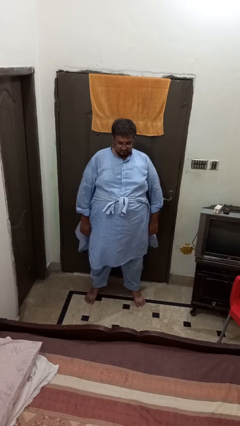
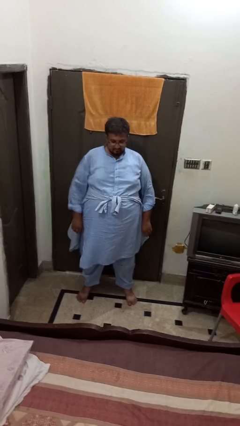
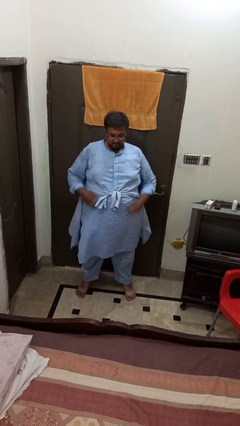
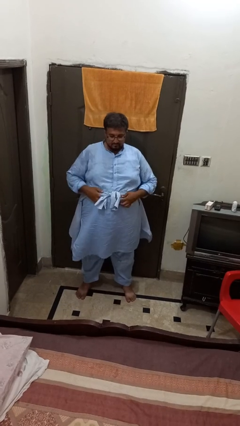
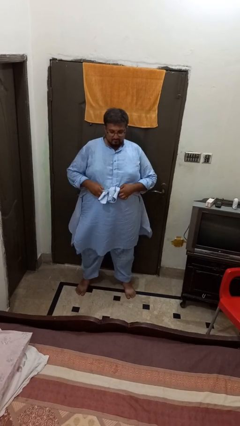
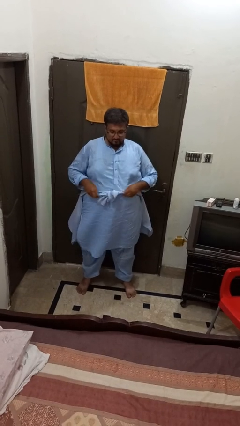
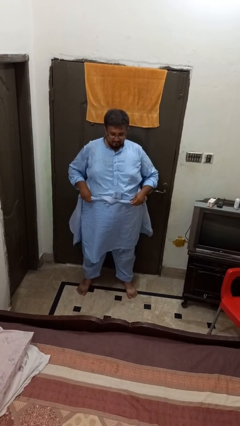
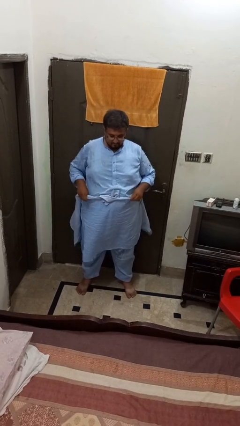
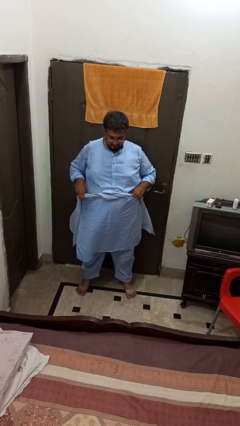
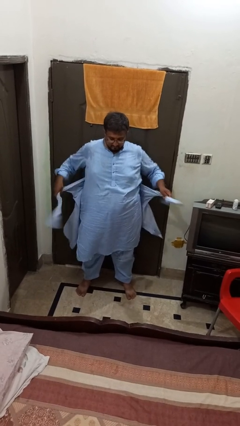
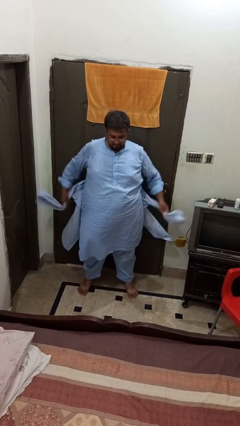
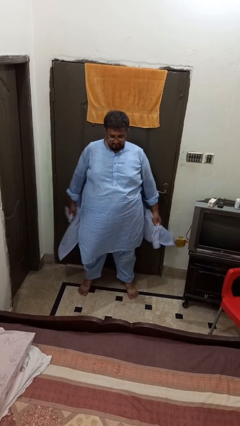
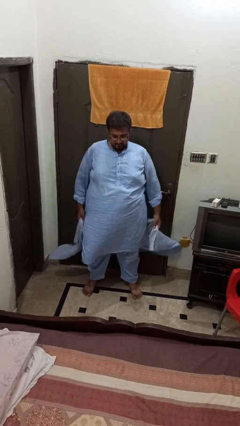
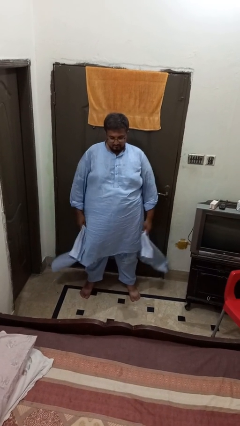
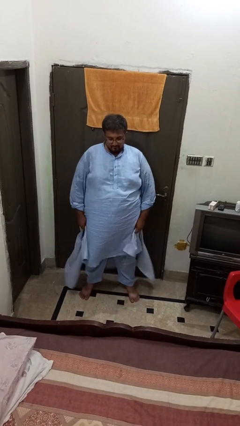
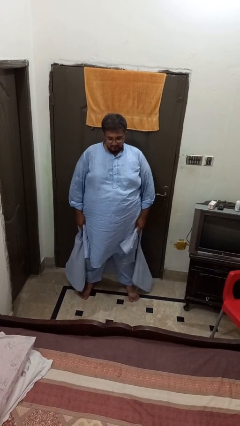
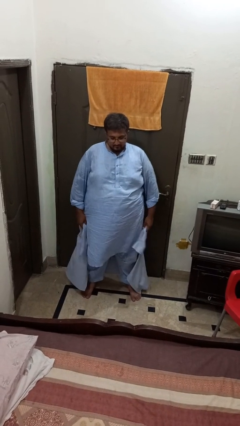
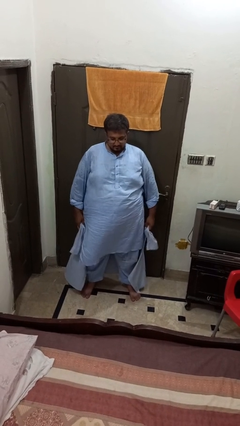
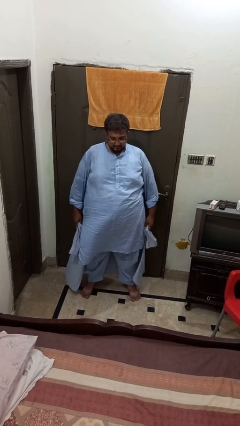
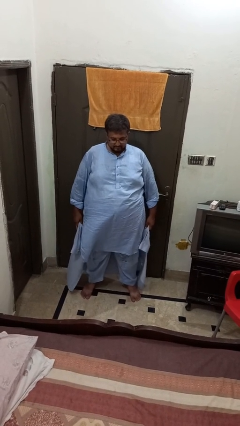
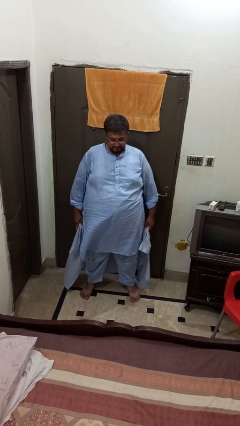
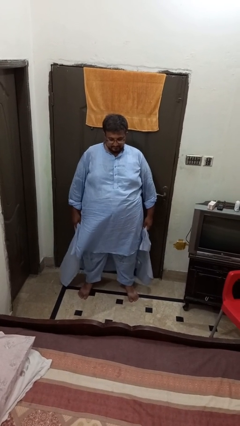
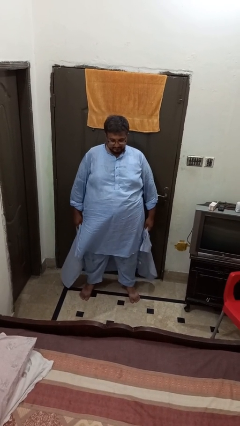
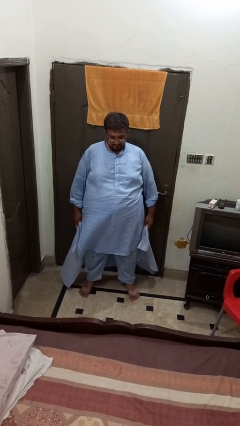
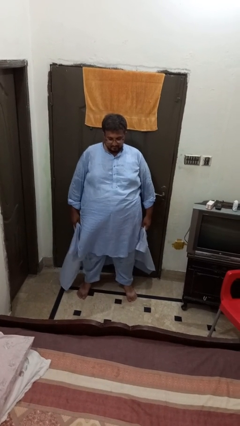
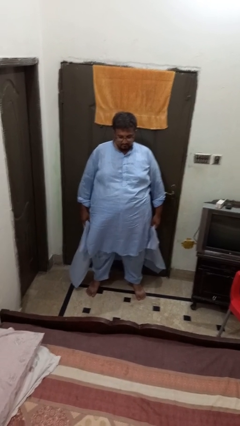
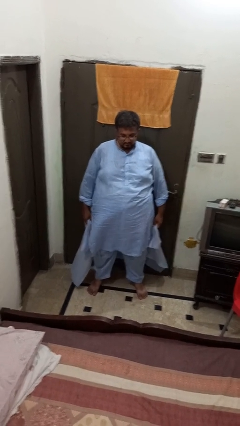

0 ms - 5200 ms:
person unties jacket around waist

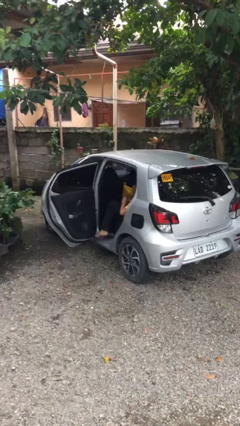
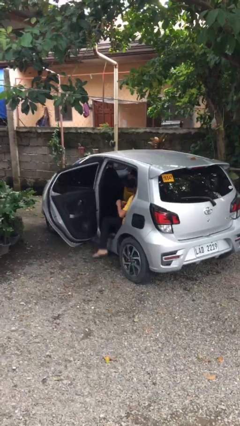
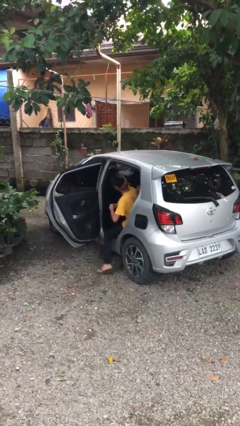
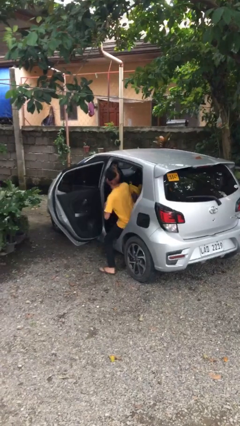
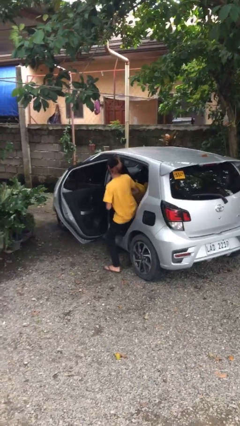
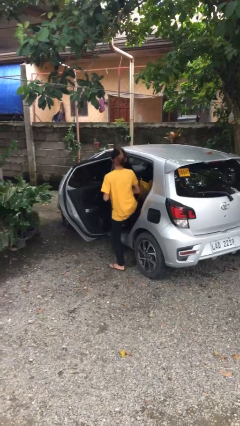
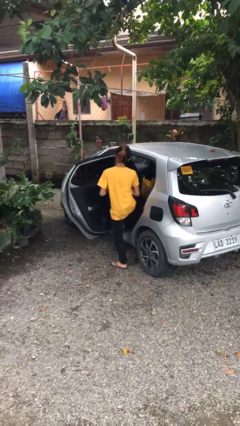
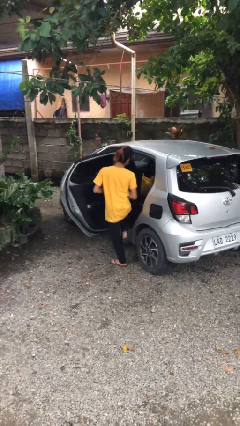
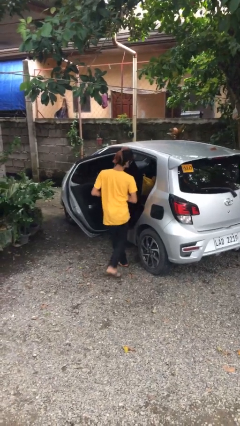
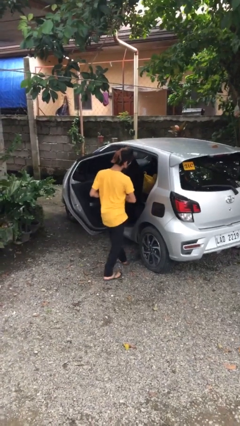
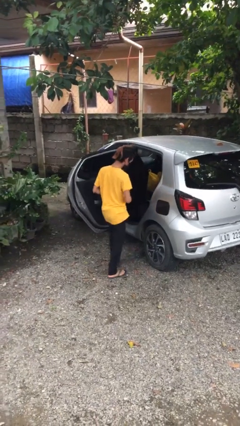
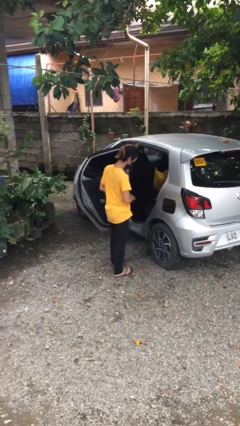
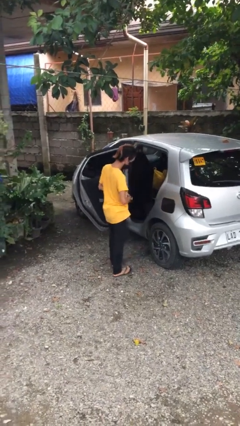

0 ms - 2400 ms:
person exits car

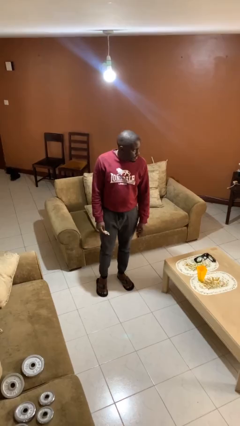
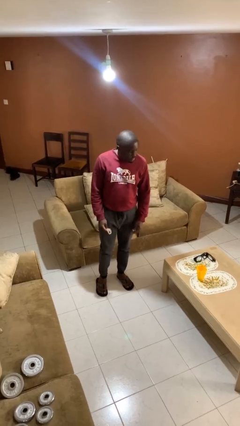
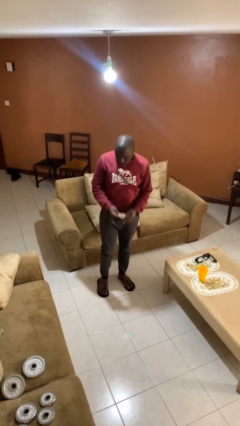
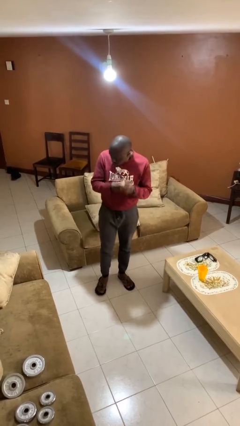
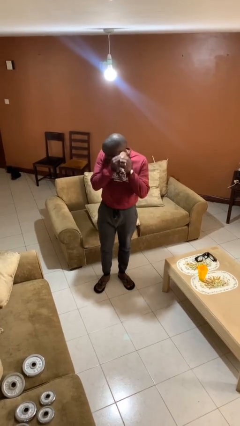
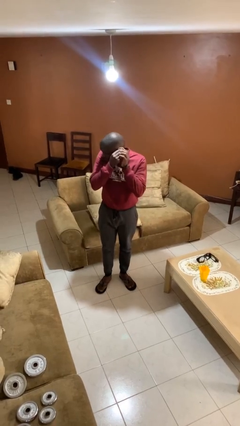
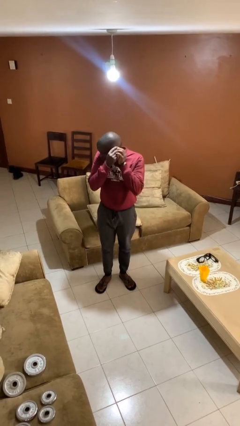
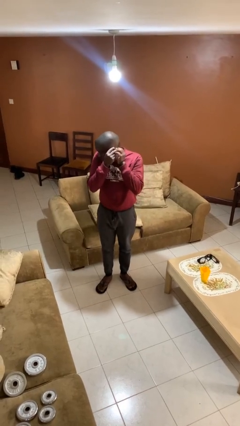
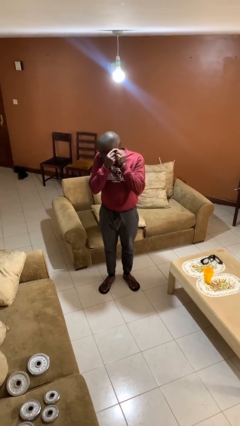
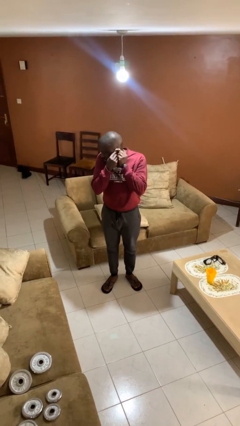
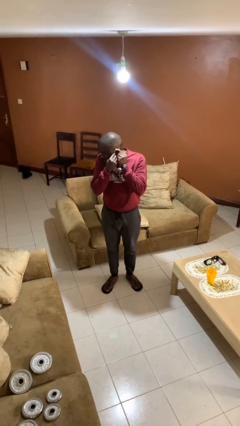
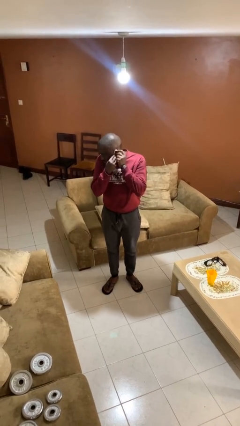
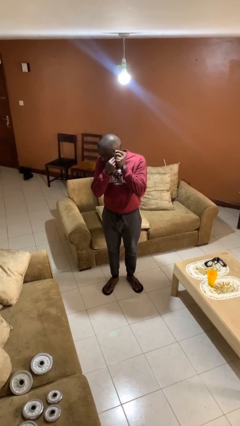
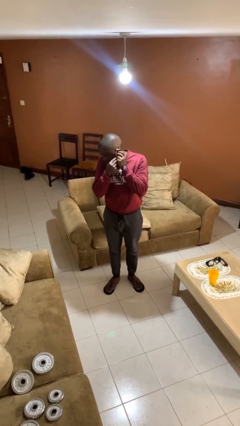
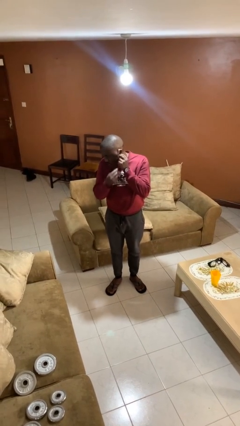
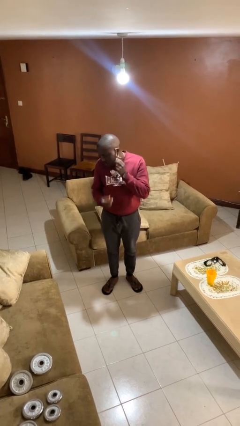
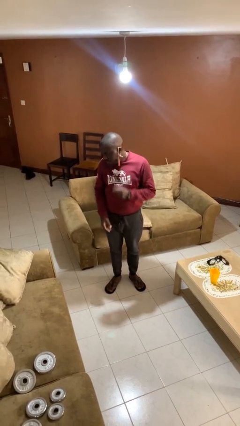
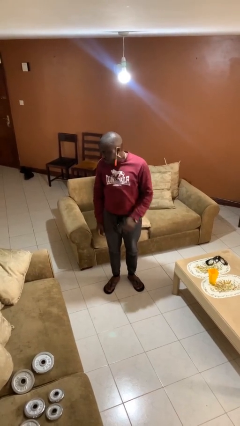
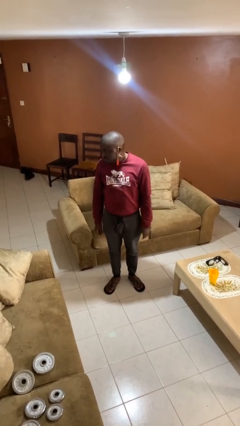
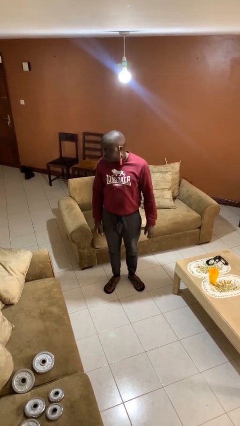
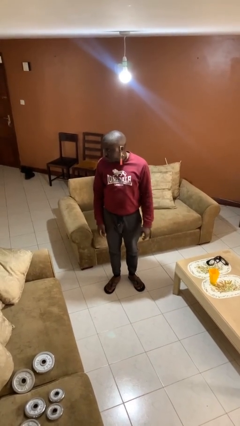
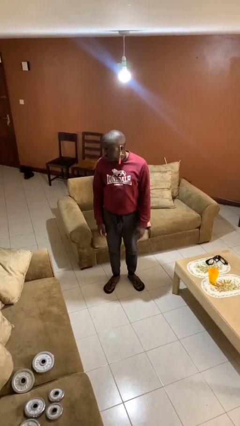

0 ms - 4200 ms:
person puts on earrings

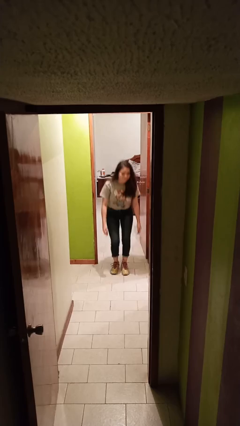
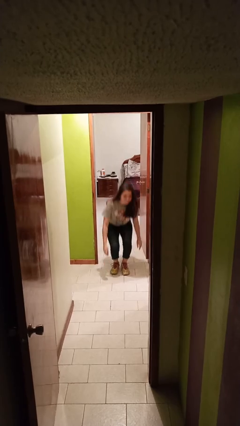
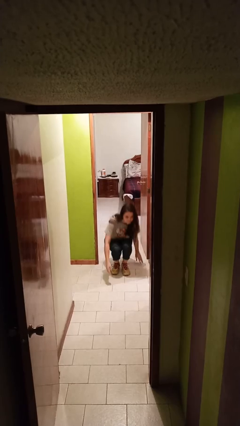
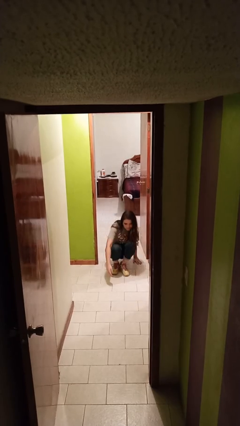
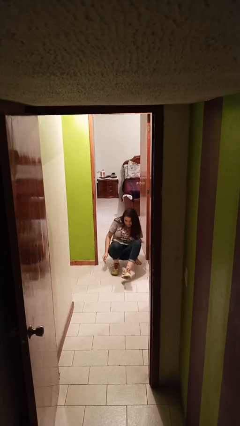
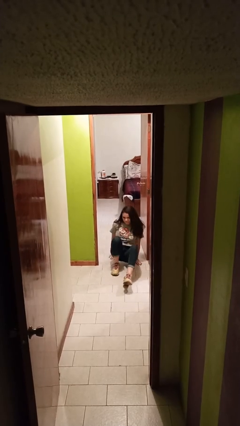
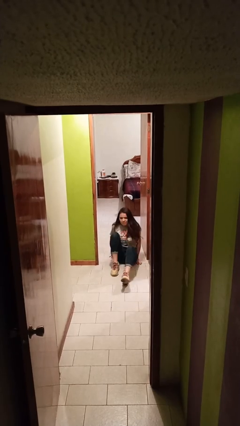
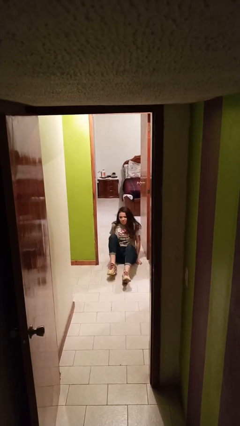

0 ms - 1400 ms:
person sits down

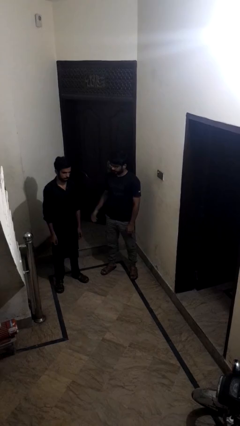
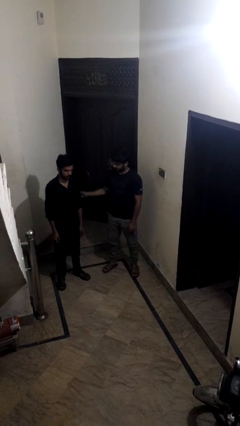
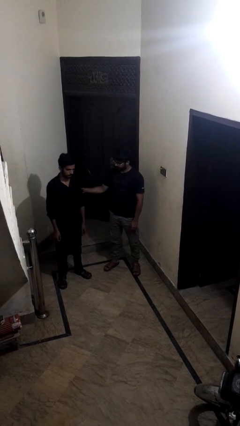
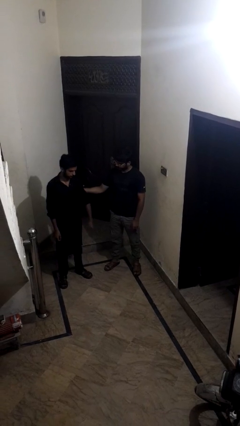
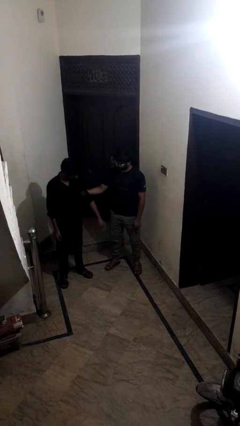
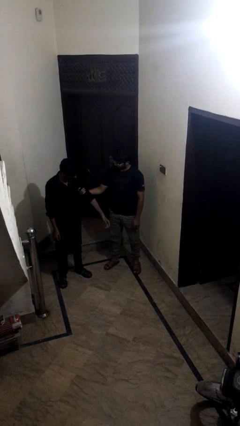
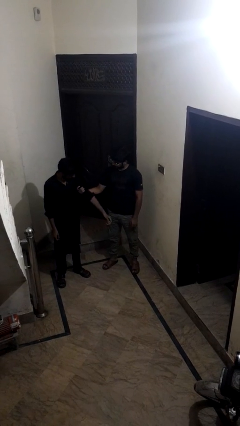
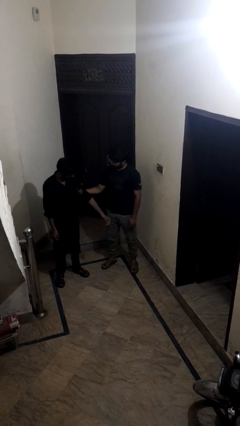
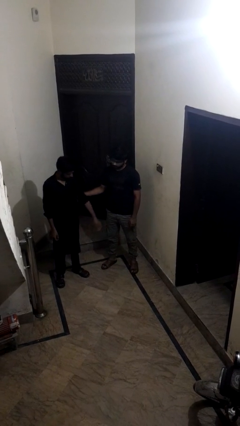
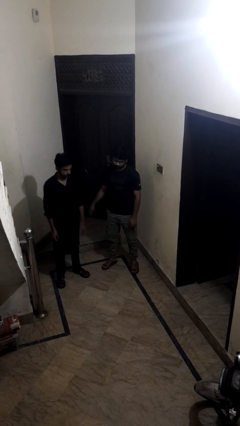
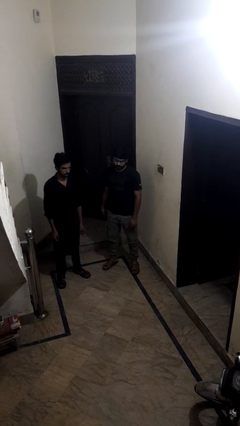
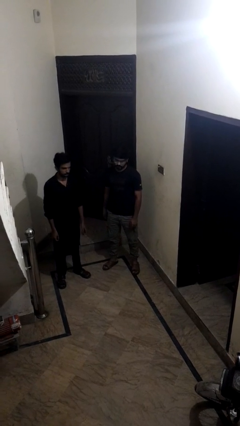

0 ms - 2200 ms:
person grabs person by bicep

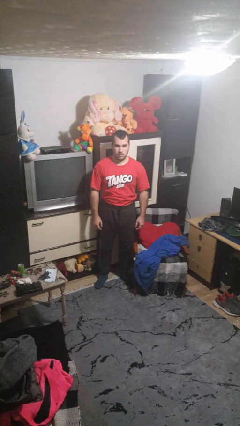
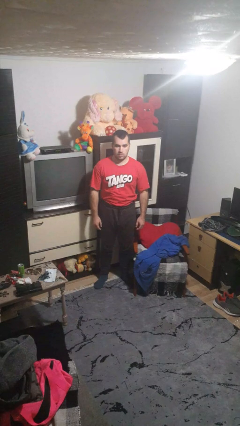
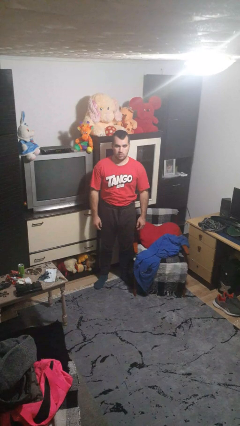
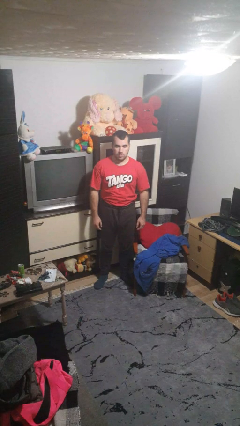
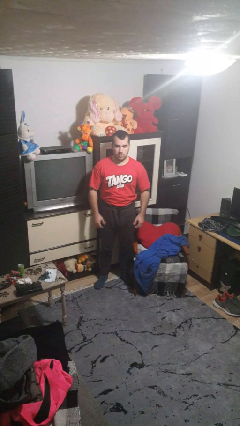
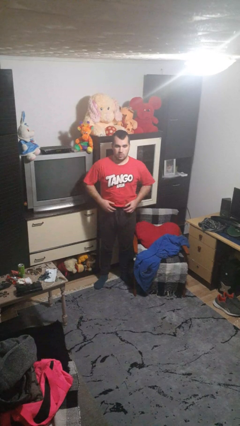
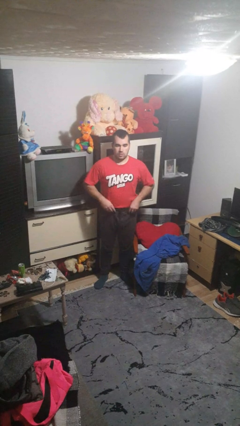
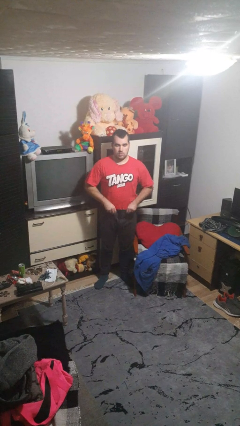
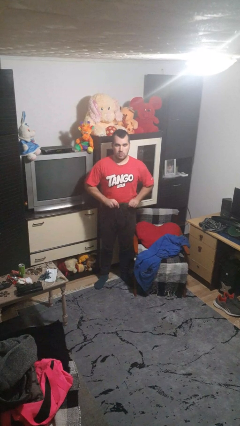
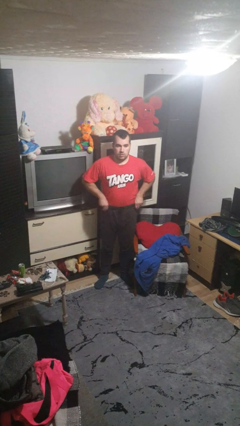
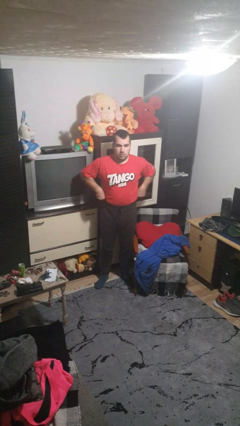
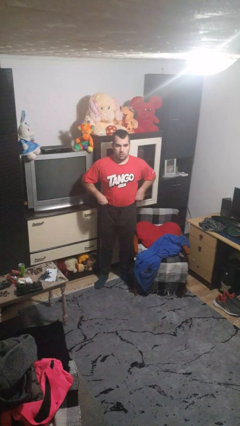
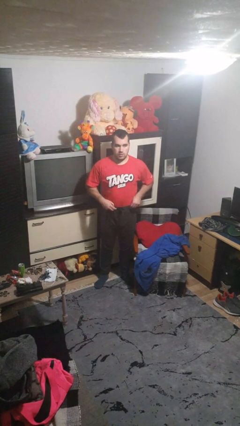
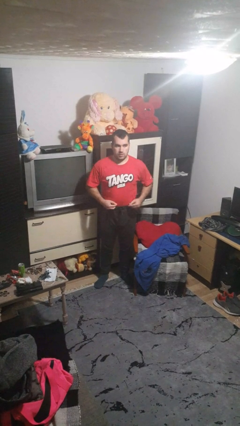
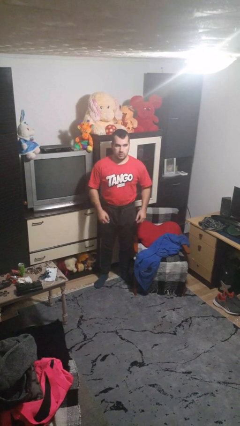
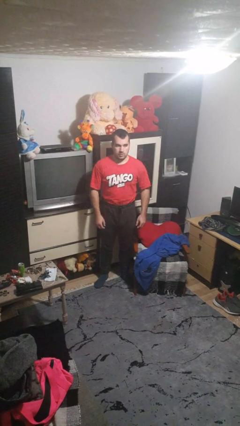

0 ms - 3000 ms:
person hikes up pants
